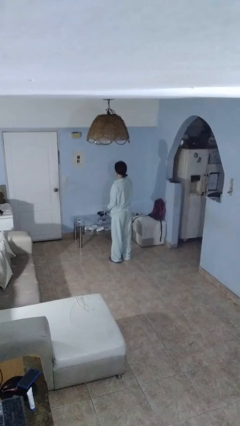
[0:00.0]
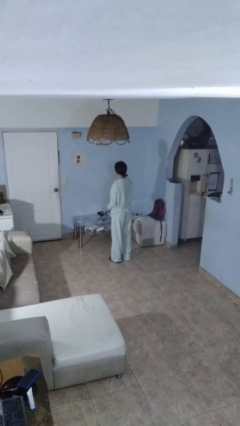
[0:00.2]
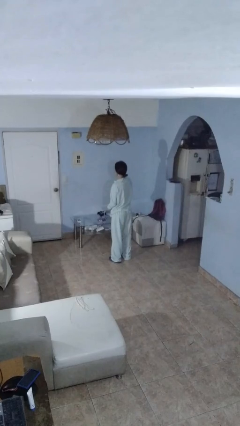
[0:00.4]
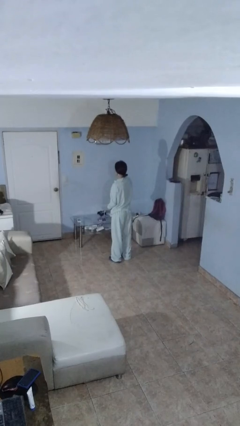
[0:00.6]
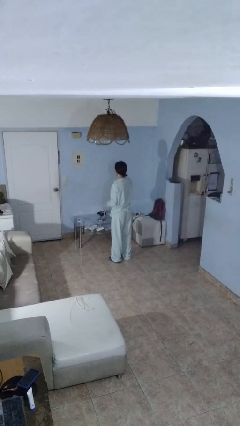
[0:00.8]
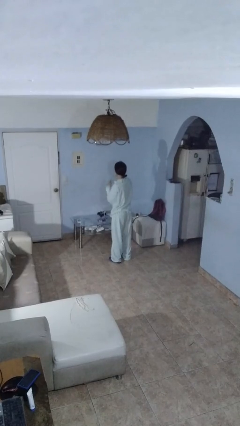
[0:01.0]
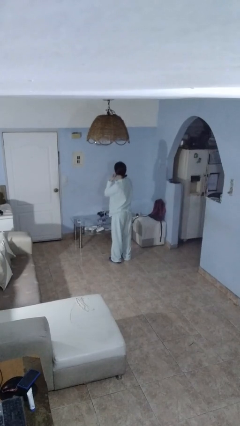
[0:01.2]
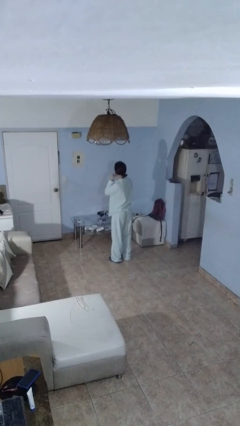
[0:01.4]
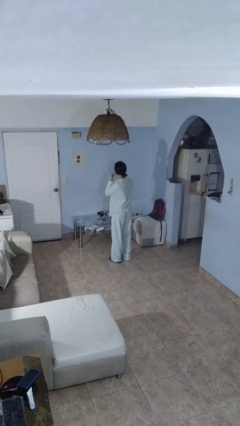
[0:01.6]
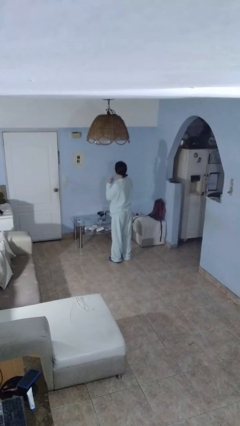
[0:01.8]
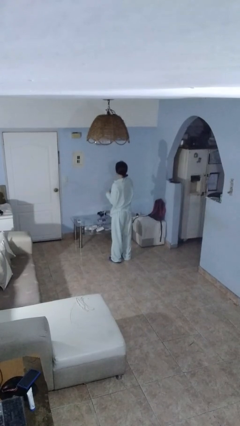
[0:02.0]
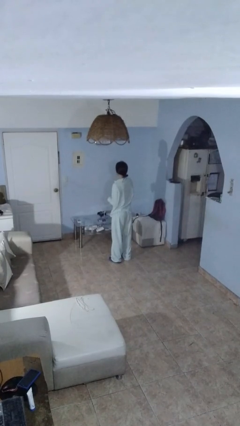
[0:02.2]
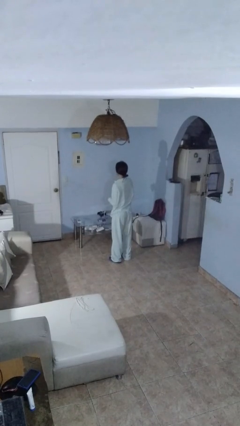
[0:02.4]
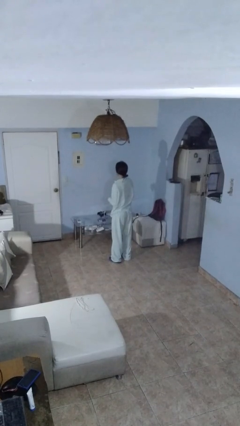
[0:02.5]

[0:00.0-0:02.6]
person takes off earrings

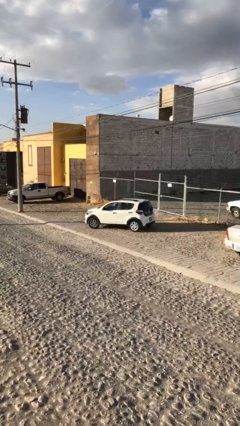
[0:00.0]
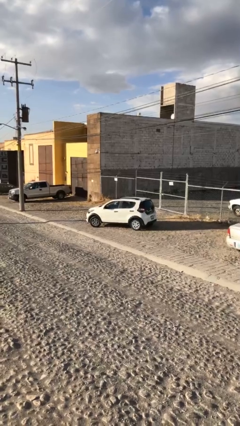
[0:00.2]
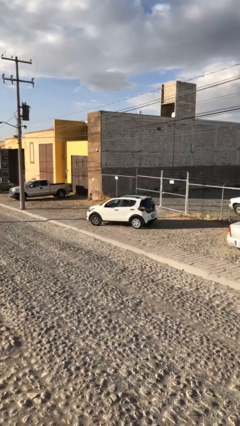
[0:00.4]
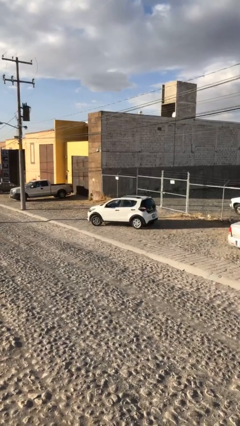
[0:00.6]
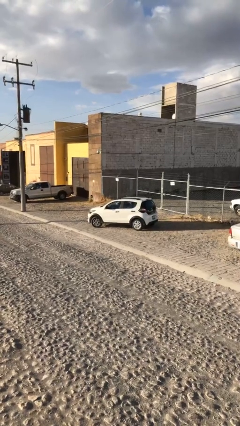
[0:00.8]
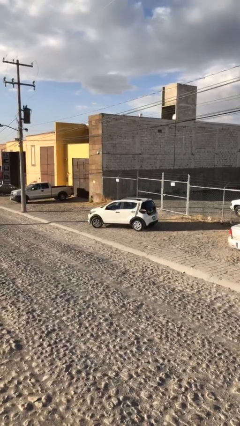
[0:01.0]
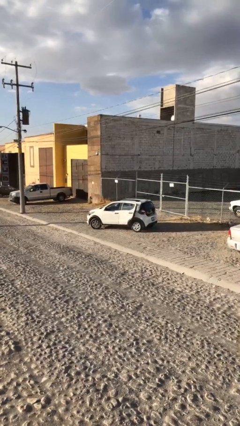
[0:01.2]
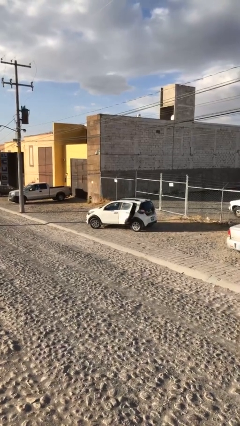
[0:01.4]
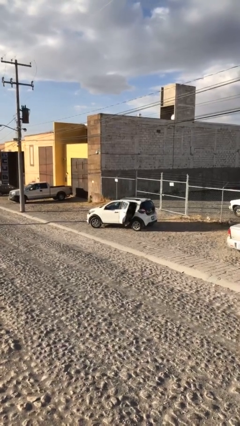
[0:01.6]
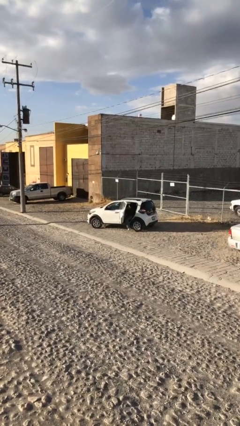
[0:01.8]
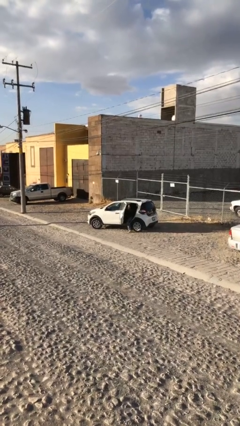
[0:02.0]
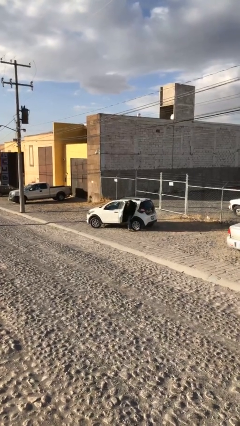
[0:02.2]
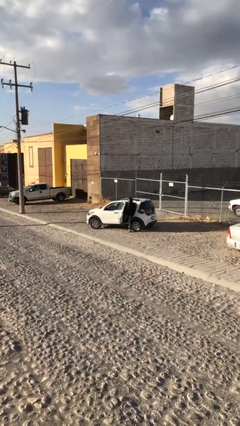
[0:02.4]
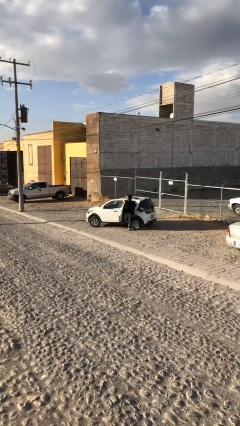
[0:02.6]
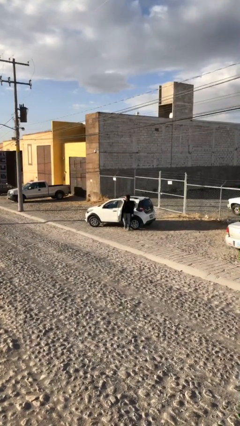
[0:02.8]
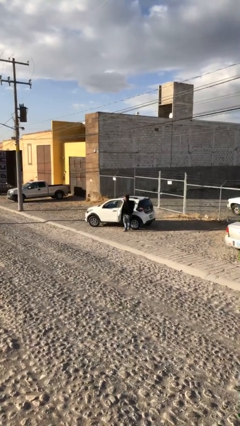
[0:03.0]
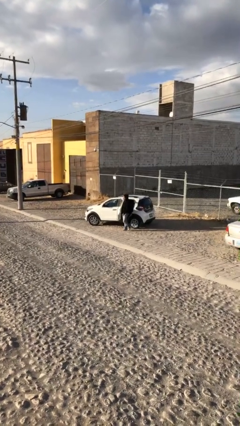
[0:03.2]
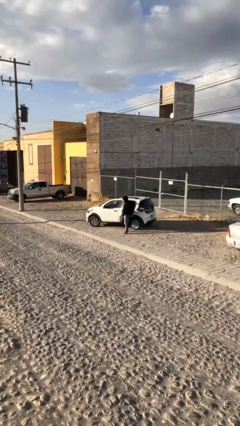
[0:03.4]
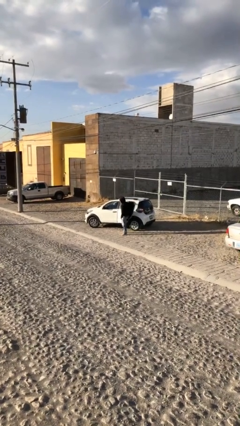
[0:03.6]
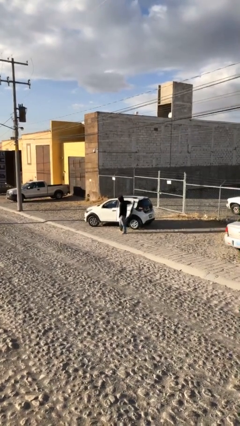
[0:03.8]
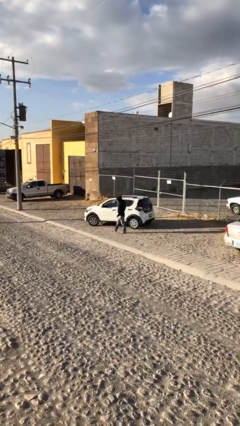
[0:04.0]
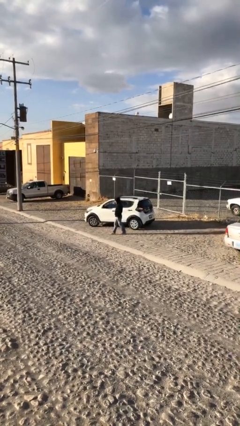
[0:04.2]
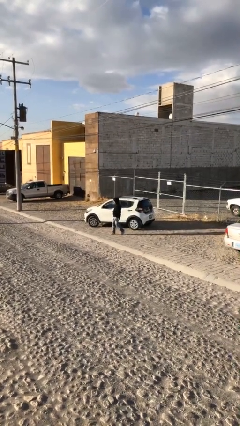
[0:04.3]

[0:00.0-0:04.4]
car drops off person

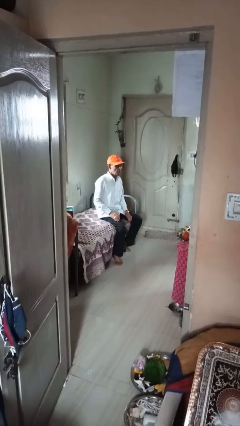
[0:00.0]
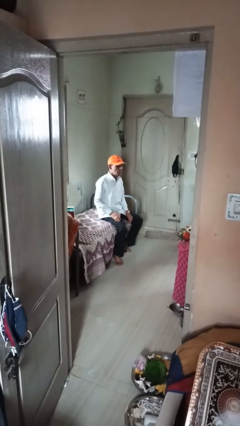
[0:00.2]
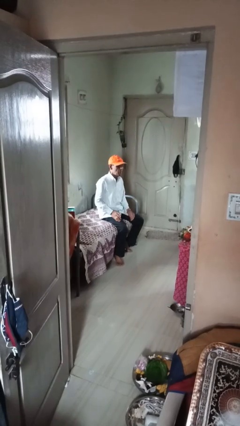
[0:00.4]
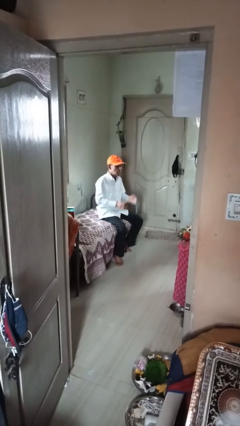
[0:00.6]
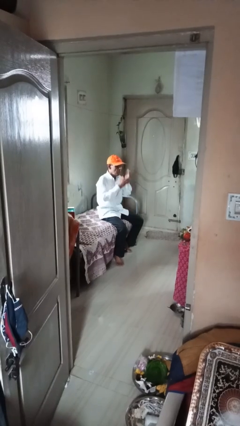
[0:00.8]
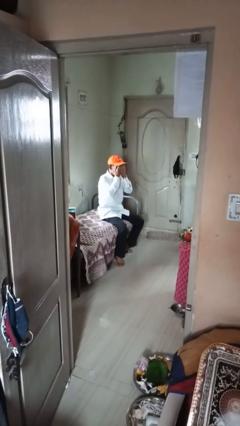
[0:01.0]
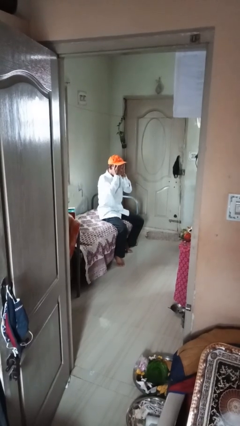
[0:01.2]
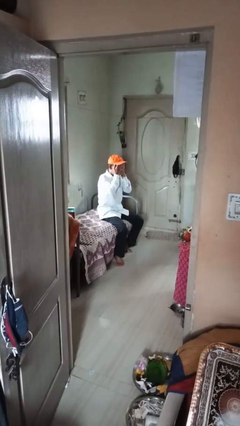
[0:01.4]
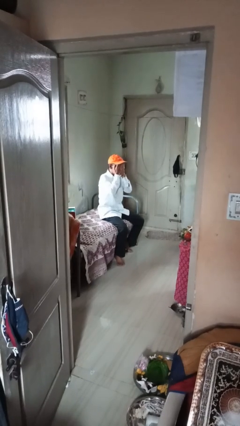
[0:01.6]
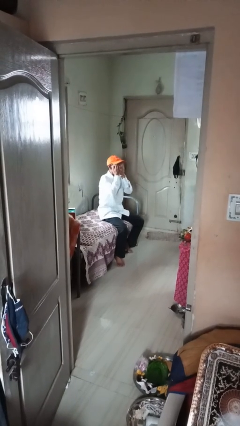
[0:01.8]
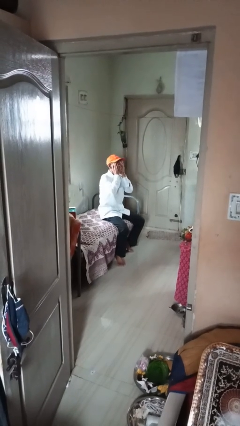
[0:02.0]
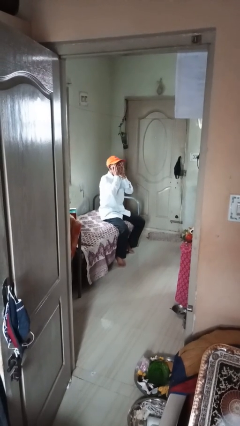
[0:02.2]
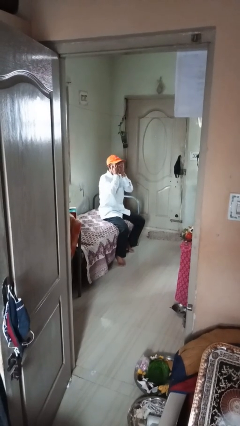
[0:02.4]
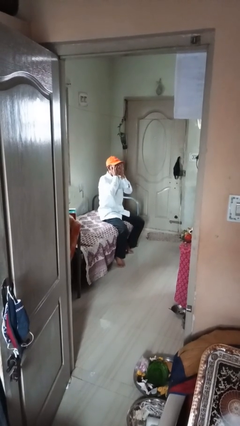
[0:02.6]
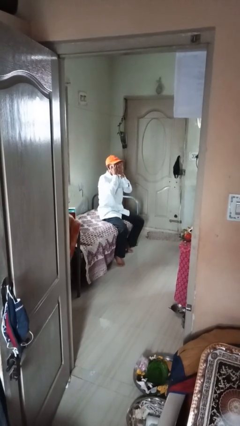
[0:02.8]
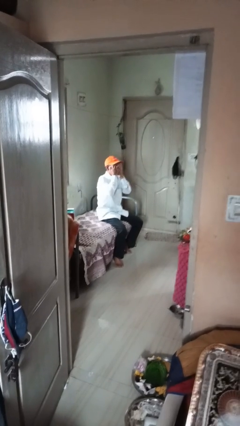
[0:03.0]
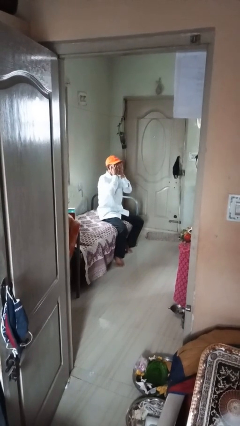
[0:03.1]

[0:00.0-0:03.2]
person covers face with hands

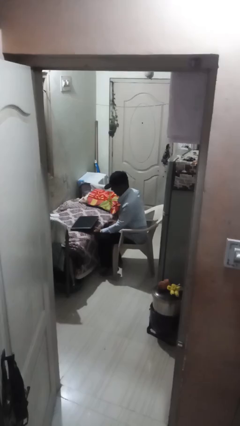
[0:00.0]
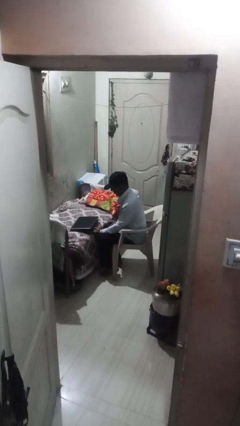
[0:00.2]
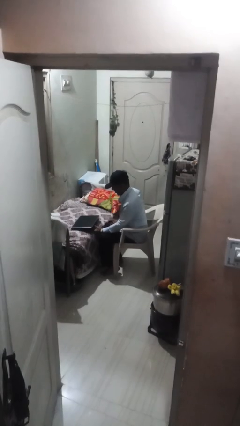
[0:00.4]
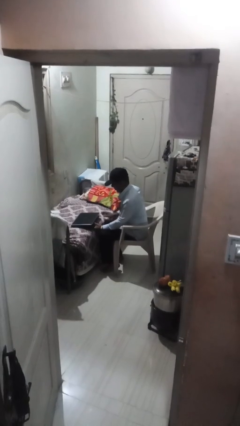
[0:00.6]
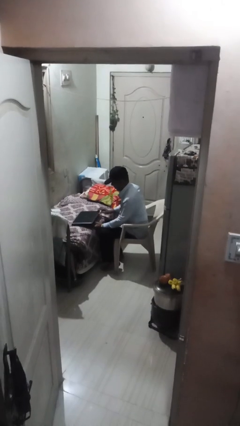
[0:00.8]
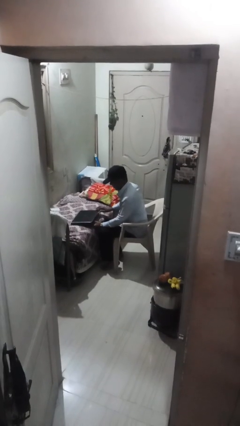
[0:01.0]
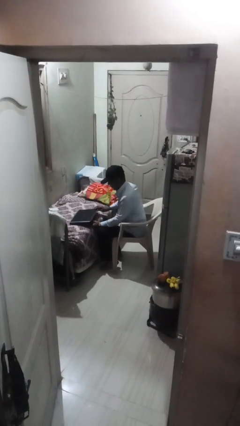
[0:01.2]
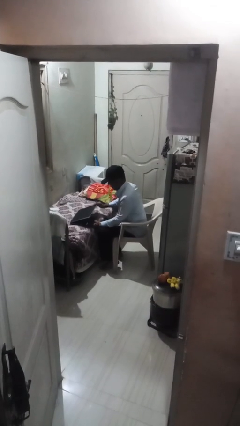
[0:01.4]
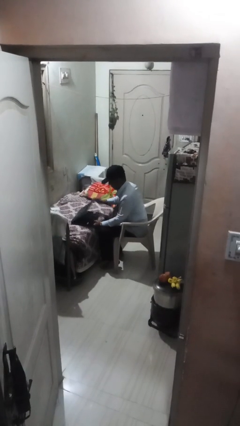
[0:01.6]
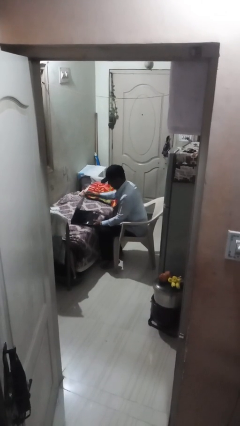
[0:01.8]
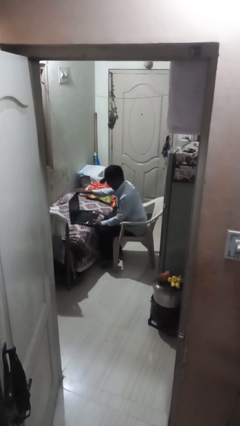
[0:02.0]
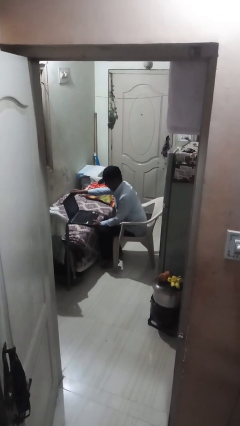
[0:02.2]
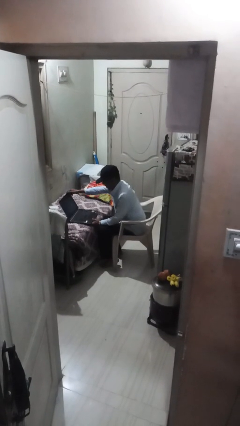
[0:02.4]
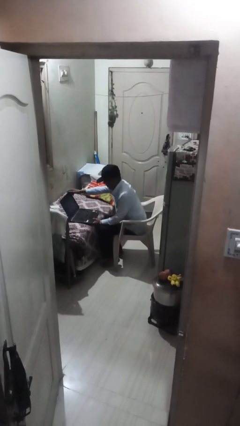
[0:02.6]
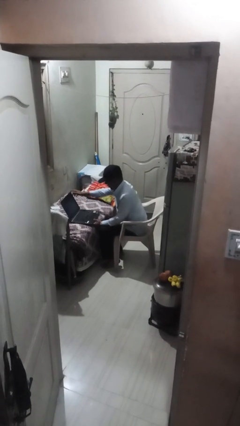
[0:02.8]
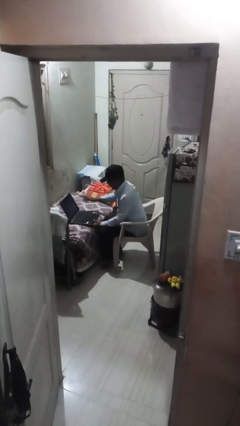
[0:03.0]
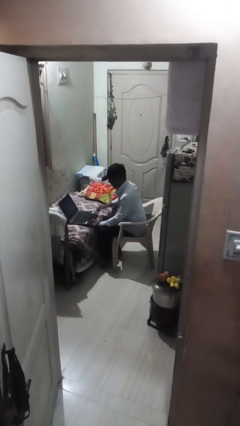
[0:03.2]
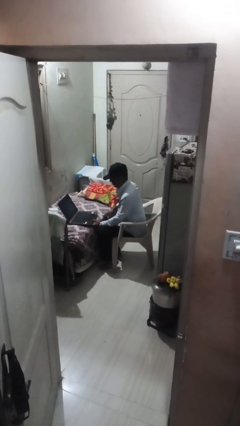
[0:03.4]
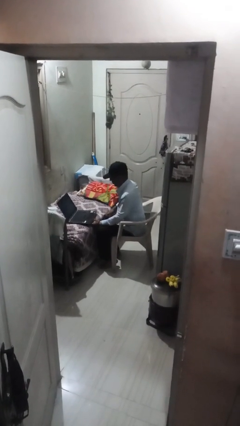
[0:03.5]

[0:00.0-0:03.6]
person opens laptop

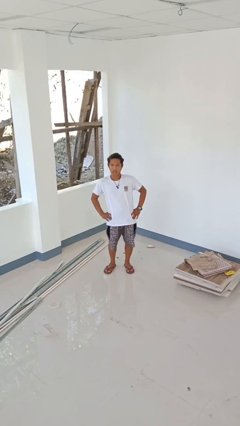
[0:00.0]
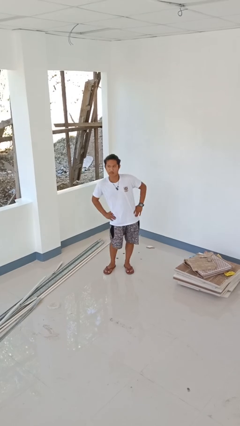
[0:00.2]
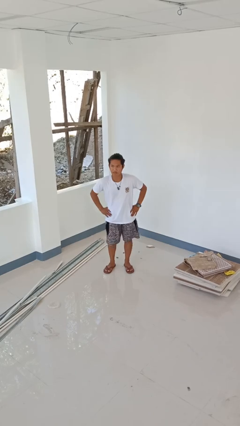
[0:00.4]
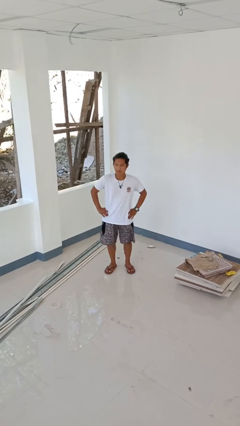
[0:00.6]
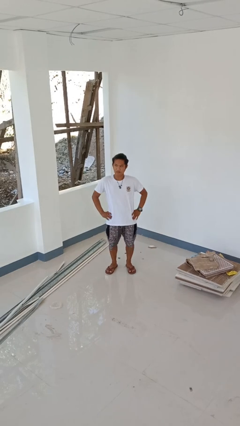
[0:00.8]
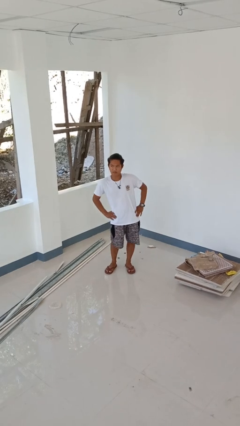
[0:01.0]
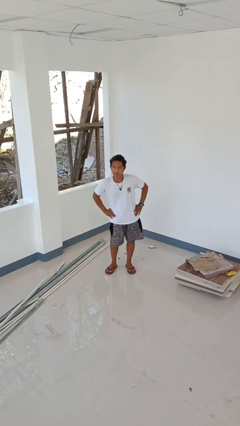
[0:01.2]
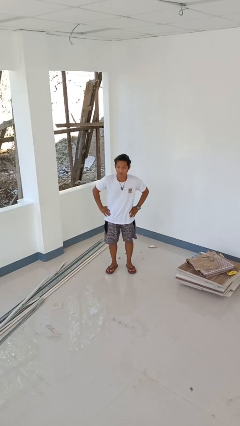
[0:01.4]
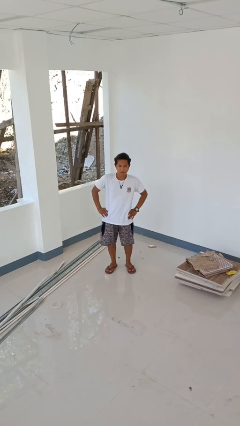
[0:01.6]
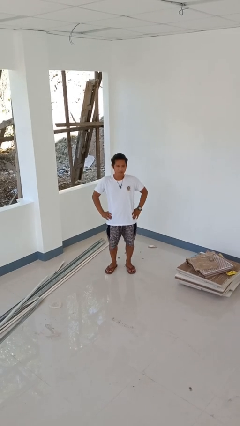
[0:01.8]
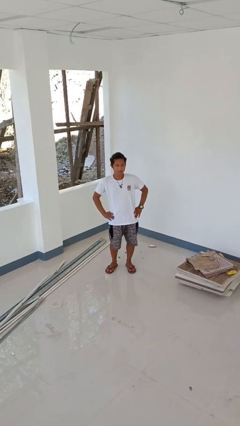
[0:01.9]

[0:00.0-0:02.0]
person wiggles hips

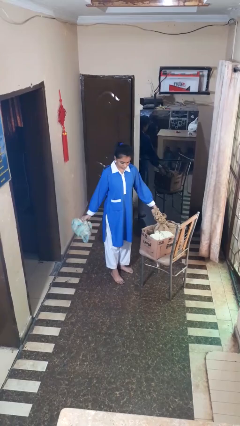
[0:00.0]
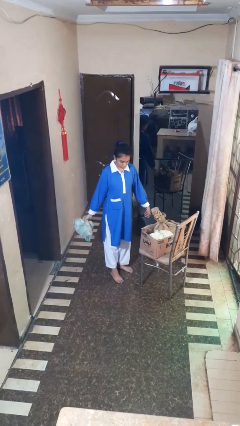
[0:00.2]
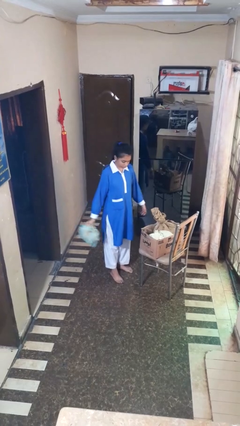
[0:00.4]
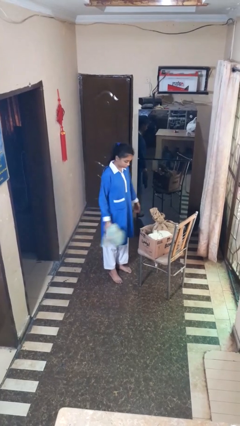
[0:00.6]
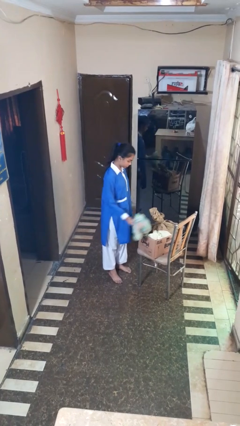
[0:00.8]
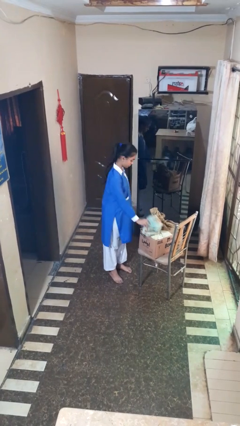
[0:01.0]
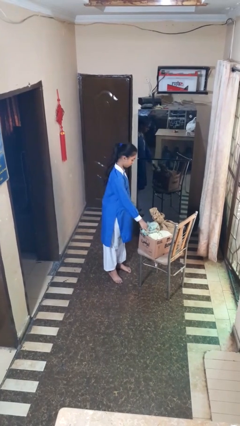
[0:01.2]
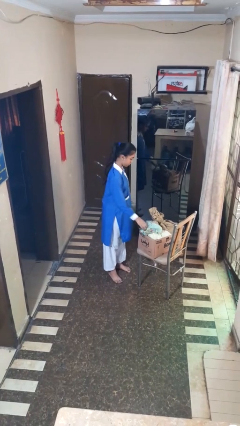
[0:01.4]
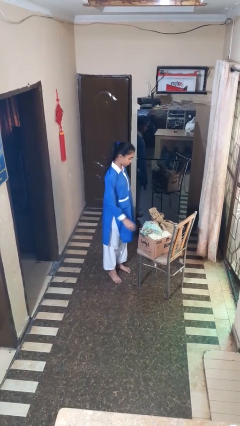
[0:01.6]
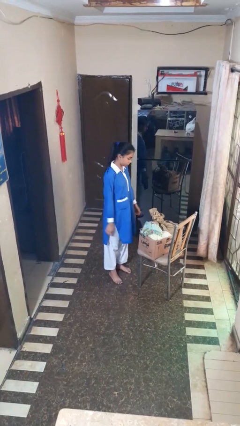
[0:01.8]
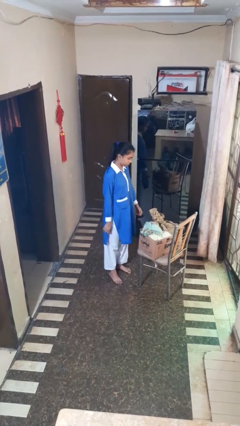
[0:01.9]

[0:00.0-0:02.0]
person puts object into box
